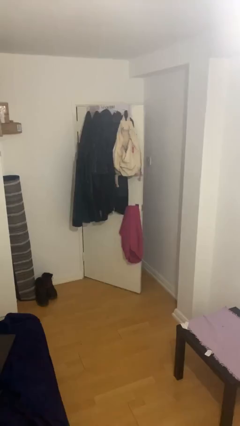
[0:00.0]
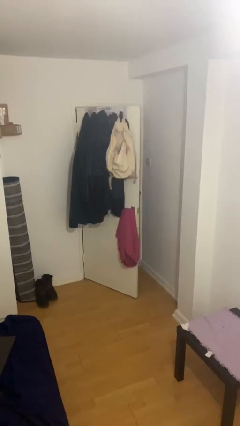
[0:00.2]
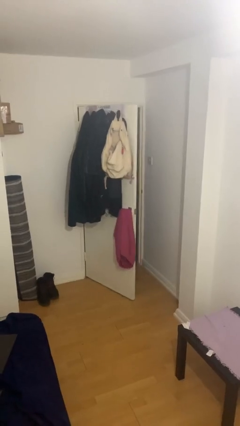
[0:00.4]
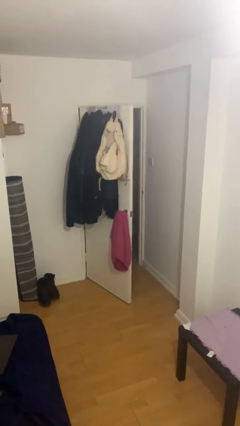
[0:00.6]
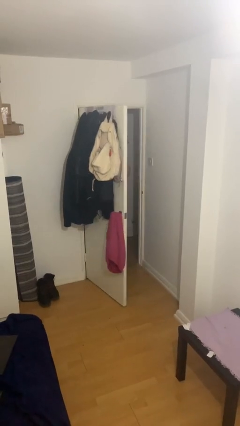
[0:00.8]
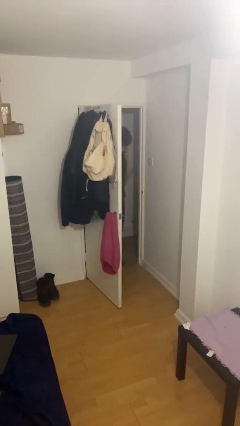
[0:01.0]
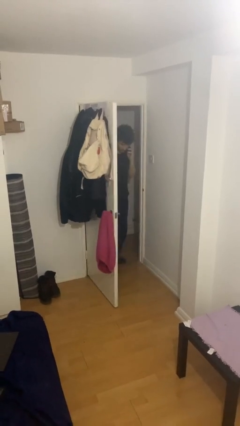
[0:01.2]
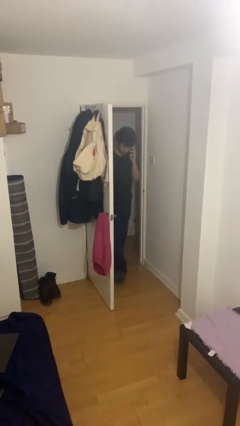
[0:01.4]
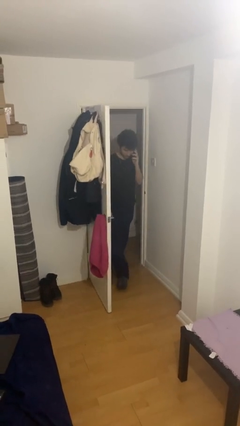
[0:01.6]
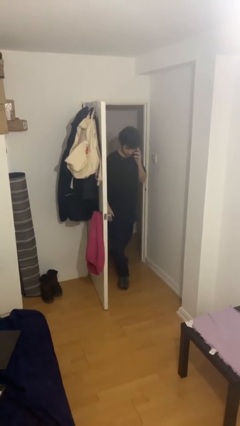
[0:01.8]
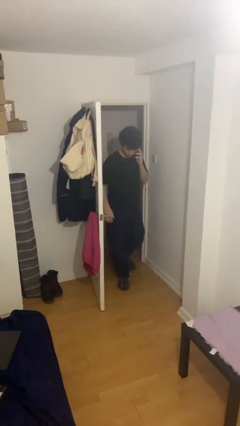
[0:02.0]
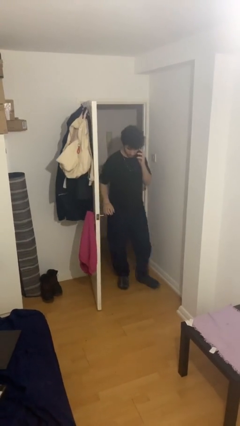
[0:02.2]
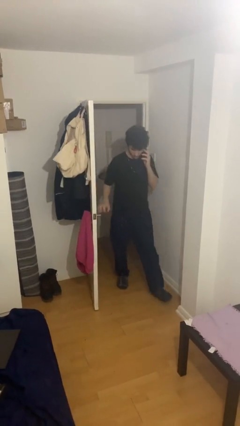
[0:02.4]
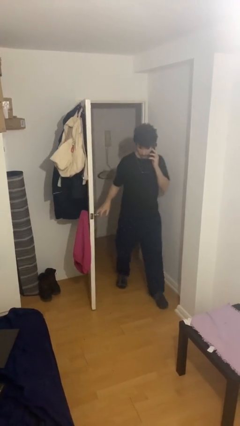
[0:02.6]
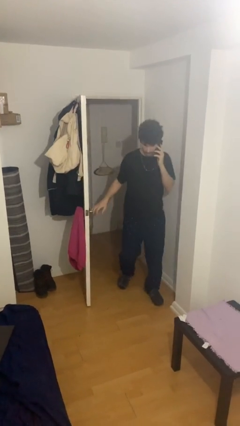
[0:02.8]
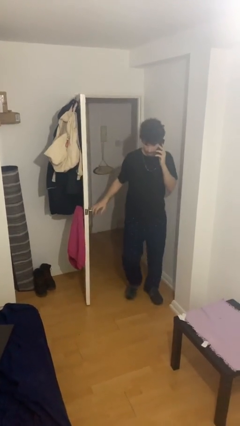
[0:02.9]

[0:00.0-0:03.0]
person enters scene through structure

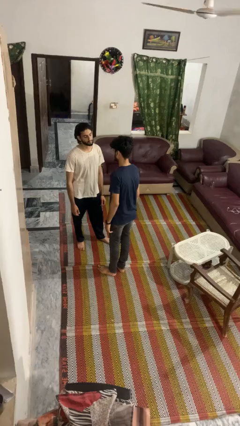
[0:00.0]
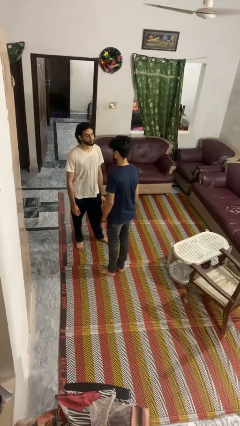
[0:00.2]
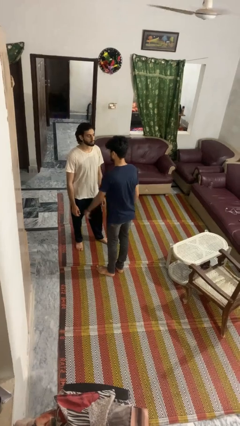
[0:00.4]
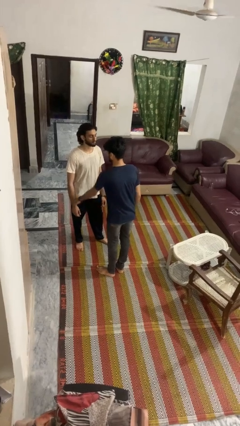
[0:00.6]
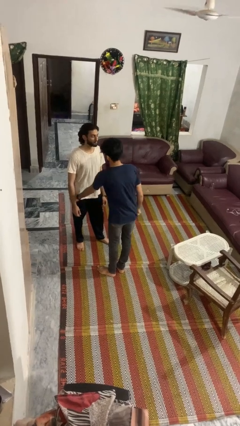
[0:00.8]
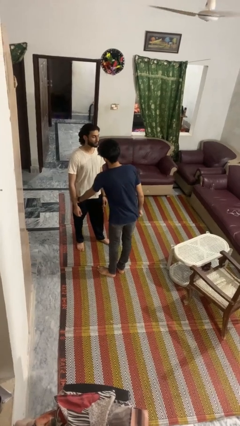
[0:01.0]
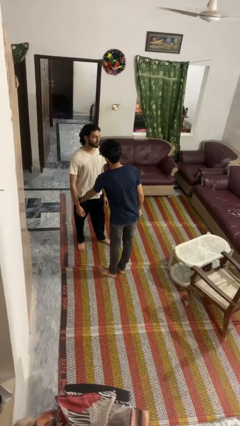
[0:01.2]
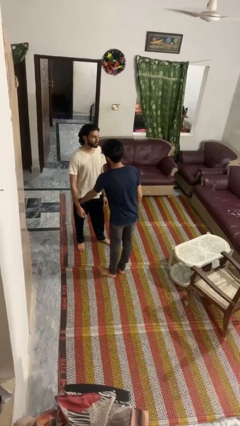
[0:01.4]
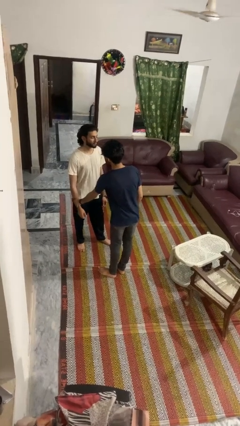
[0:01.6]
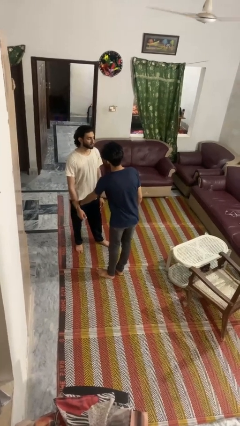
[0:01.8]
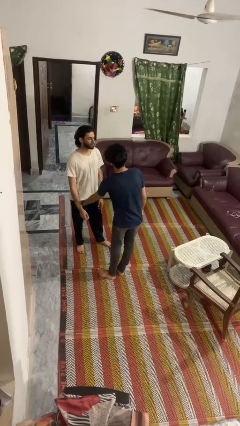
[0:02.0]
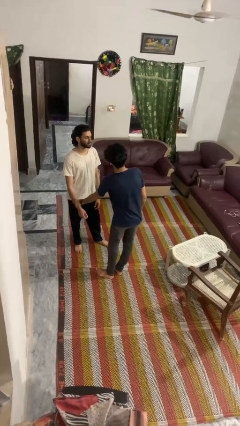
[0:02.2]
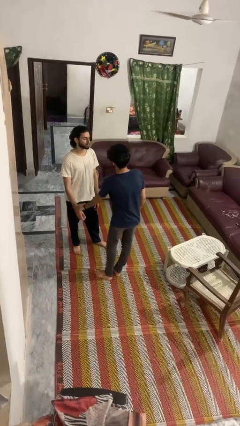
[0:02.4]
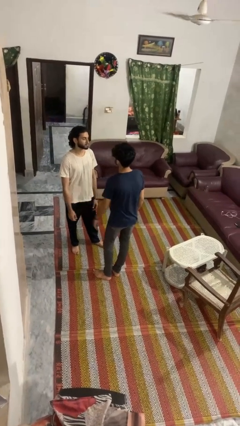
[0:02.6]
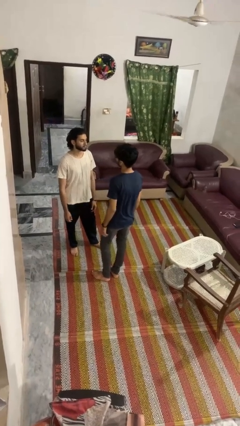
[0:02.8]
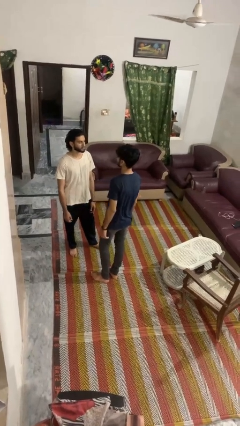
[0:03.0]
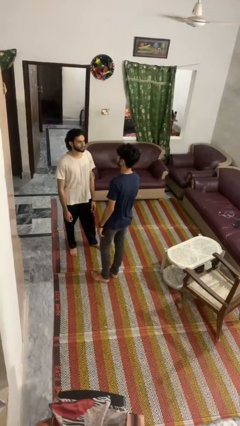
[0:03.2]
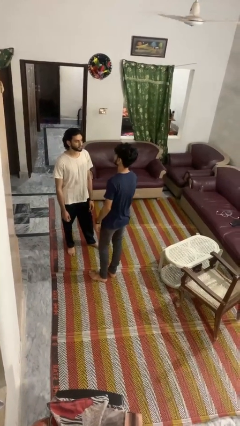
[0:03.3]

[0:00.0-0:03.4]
person grabs person by forearm

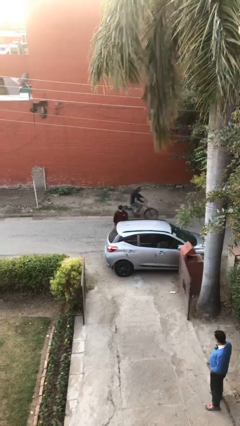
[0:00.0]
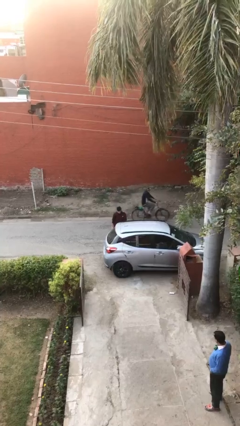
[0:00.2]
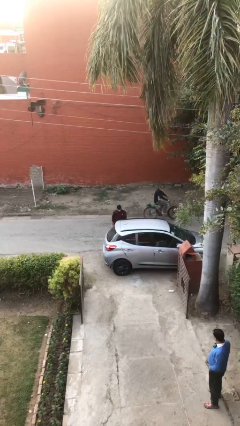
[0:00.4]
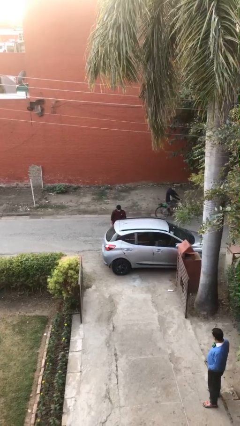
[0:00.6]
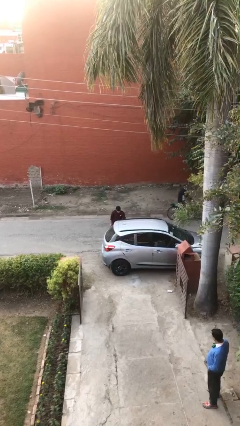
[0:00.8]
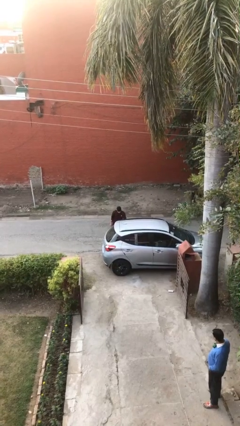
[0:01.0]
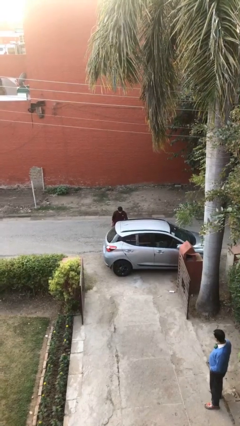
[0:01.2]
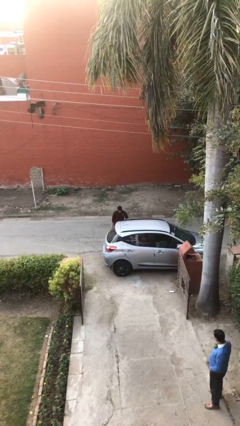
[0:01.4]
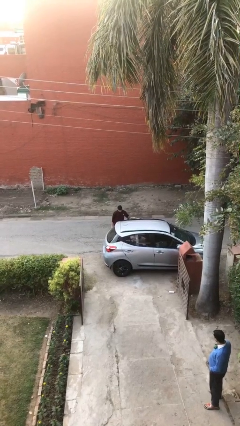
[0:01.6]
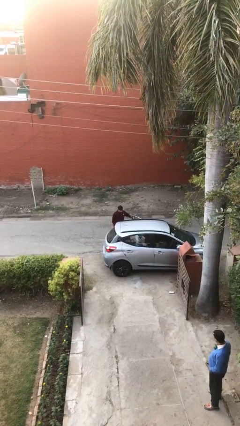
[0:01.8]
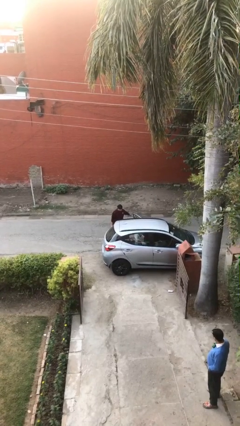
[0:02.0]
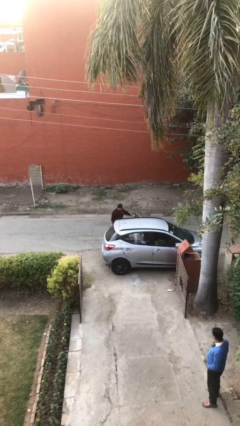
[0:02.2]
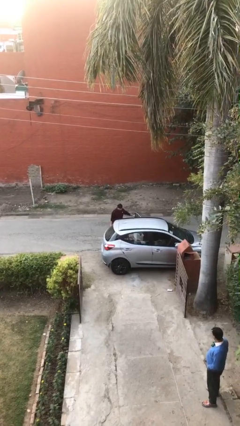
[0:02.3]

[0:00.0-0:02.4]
person opens car door

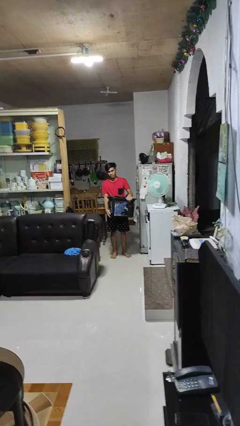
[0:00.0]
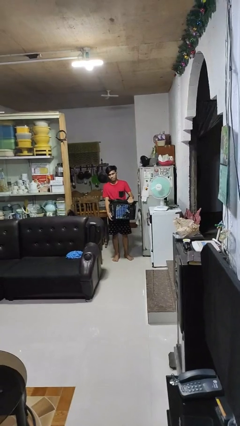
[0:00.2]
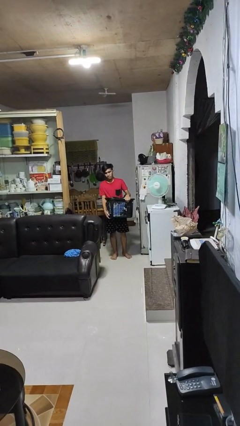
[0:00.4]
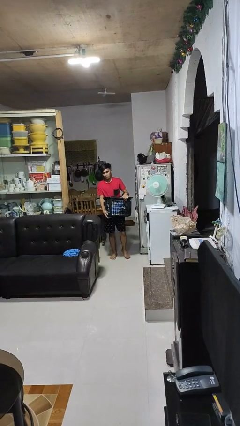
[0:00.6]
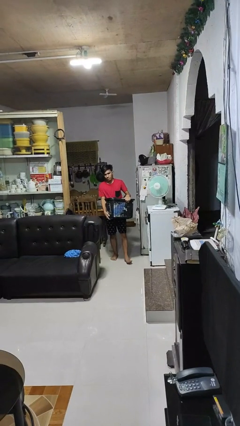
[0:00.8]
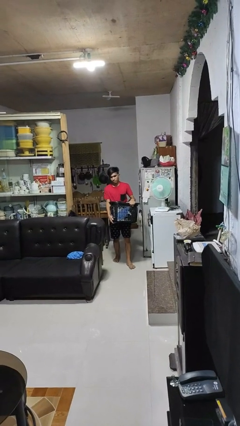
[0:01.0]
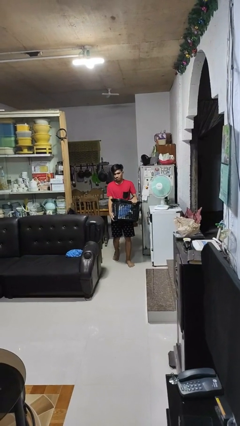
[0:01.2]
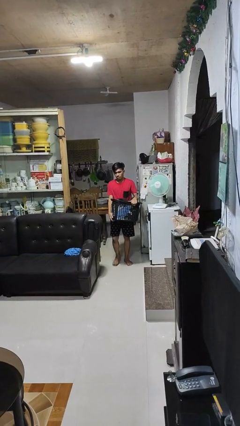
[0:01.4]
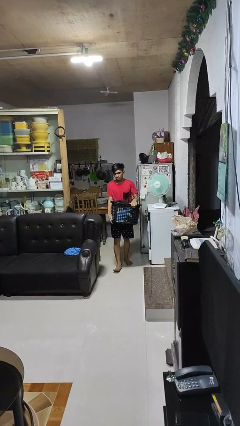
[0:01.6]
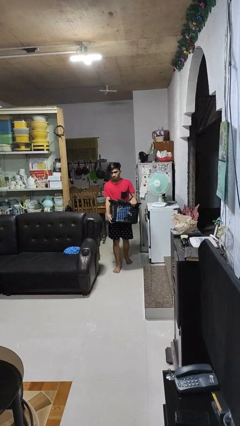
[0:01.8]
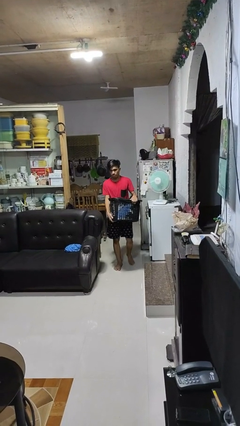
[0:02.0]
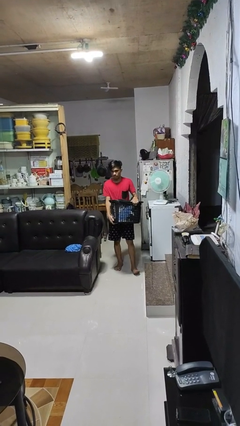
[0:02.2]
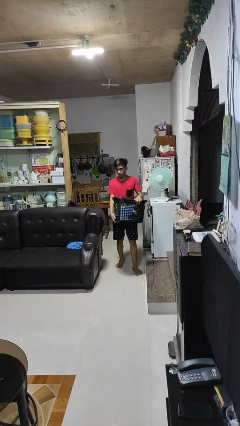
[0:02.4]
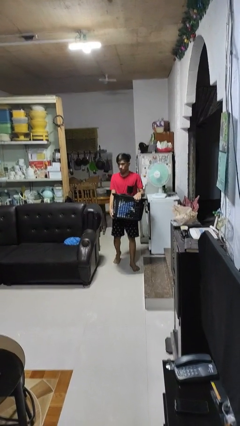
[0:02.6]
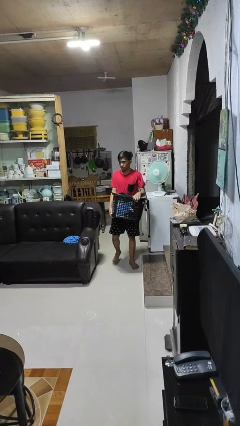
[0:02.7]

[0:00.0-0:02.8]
person carries laundry basket

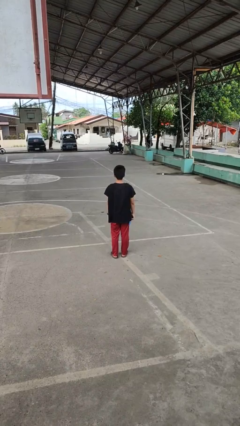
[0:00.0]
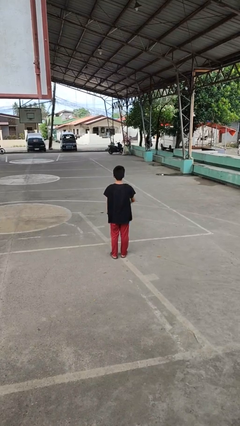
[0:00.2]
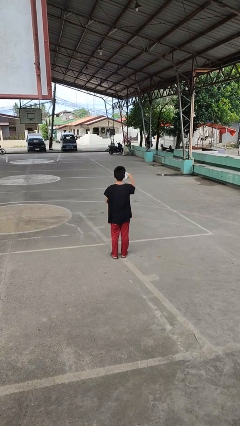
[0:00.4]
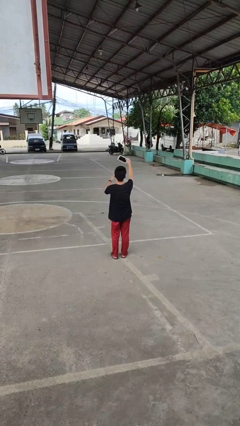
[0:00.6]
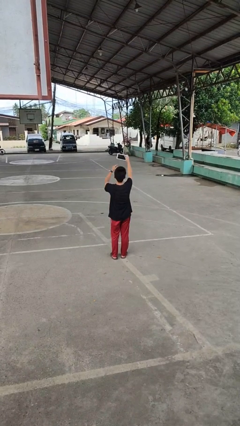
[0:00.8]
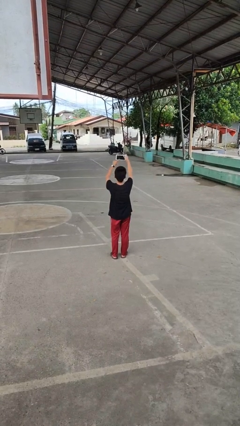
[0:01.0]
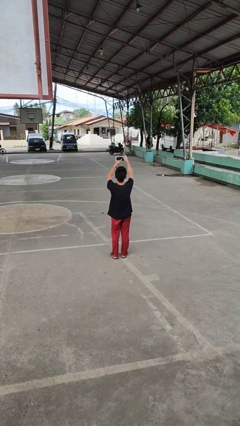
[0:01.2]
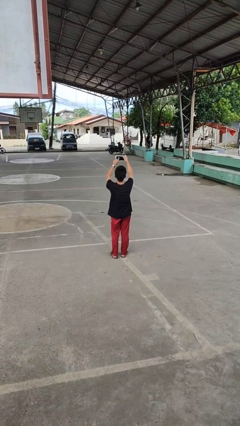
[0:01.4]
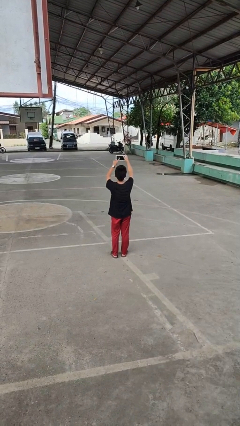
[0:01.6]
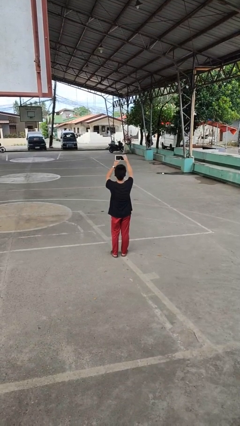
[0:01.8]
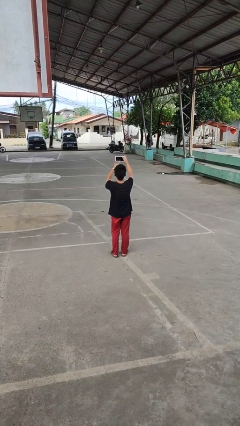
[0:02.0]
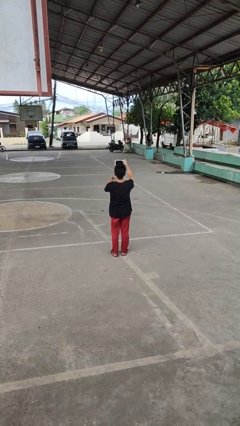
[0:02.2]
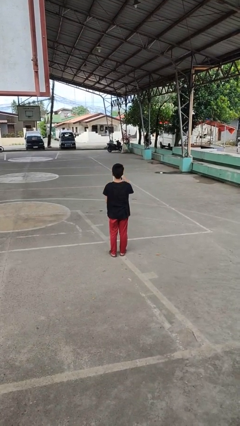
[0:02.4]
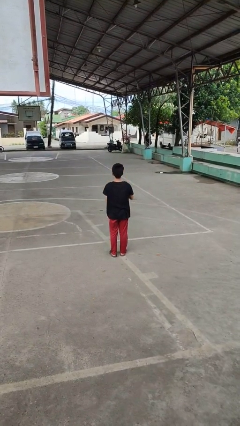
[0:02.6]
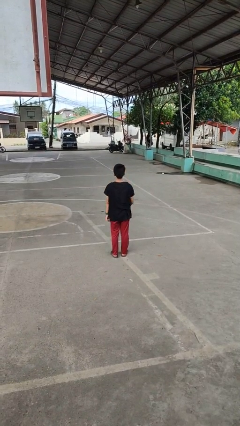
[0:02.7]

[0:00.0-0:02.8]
person interacts with tablet

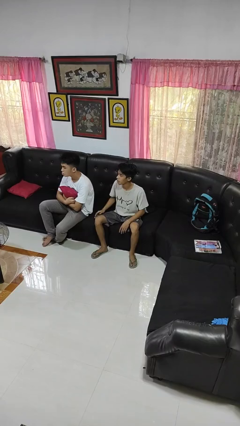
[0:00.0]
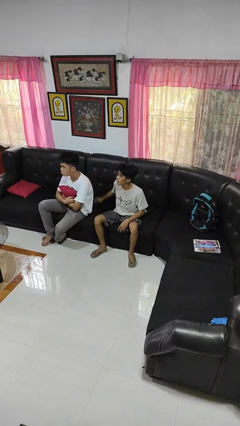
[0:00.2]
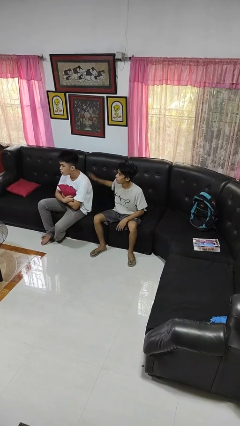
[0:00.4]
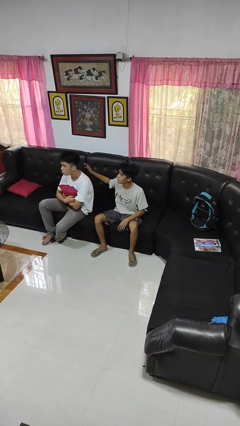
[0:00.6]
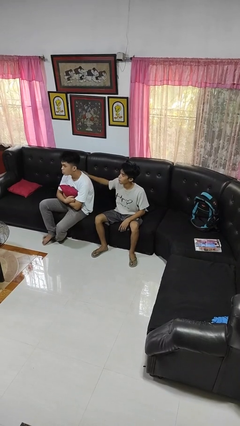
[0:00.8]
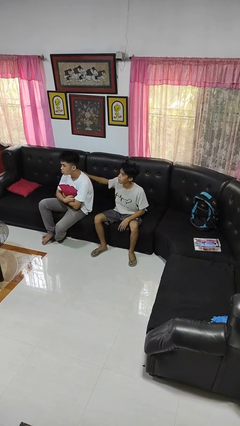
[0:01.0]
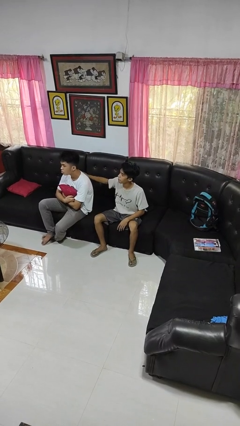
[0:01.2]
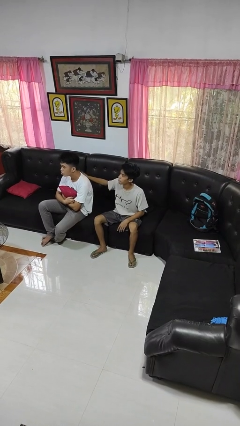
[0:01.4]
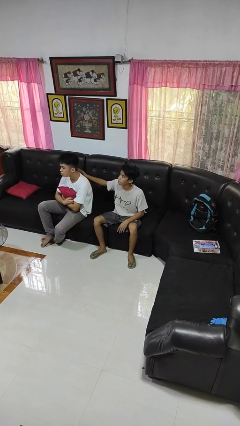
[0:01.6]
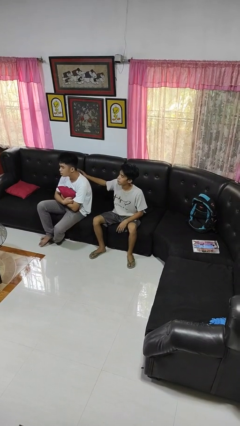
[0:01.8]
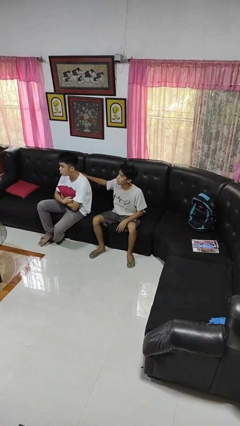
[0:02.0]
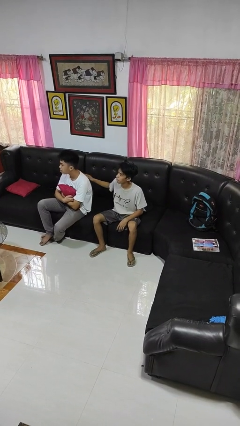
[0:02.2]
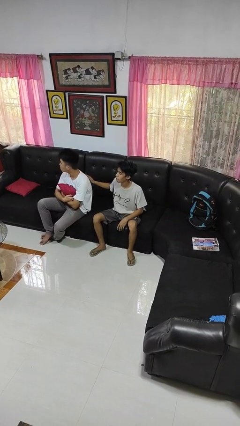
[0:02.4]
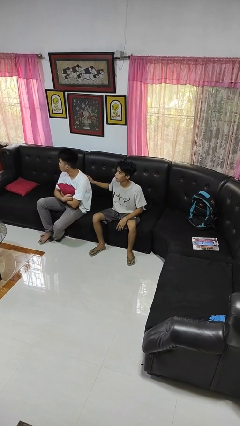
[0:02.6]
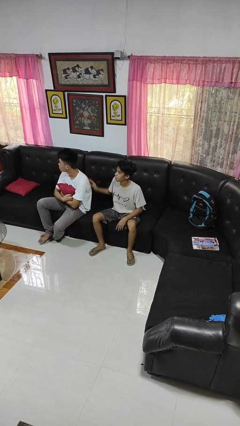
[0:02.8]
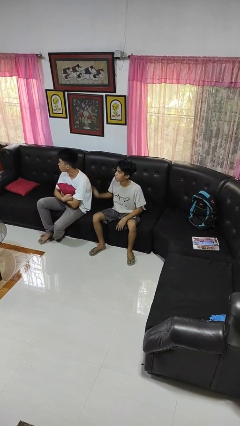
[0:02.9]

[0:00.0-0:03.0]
person touches back of person
